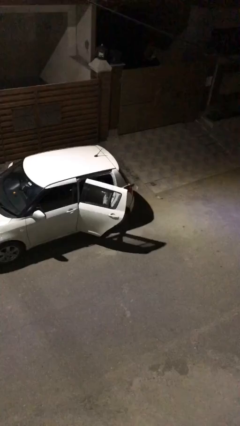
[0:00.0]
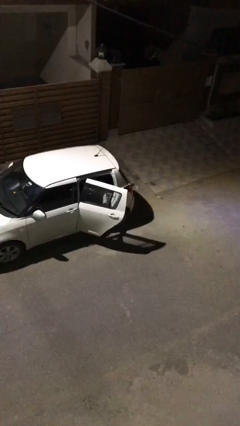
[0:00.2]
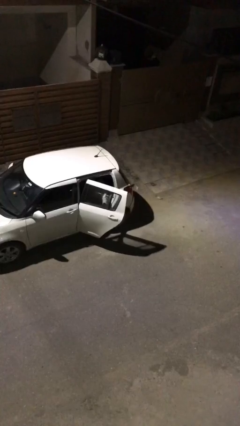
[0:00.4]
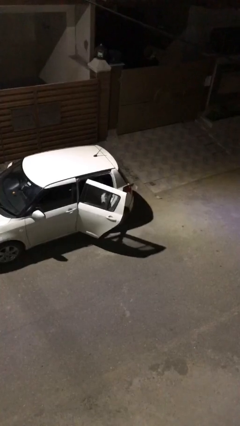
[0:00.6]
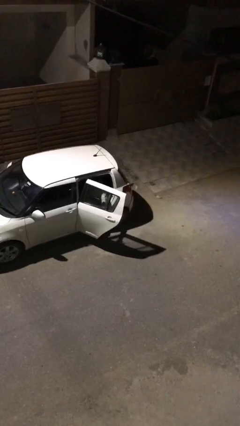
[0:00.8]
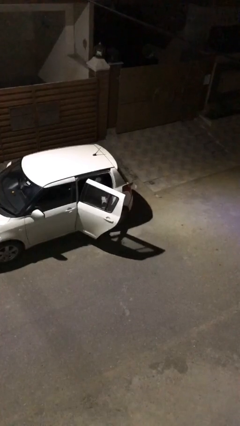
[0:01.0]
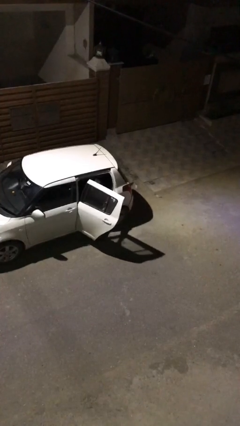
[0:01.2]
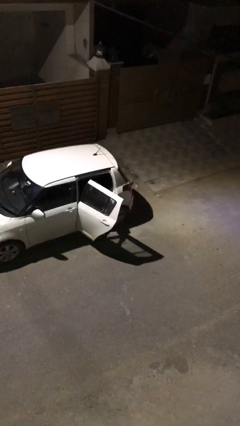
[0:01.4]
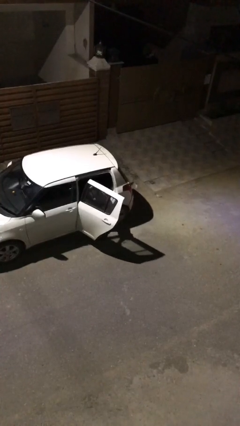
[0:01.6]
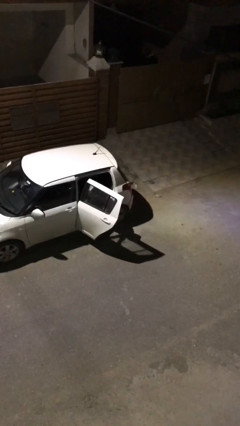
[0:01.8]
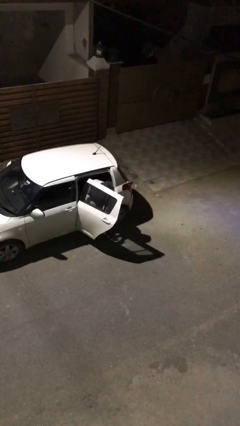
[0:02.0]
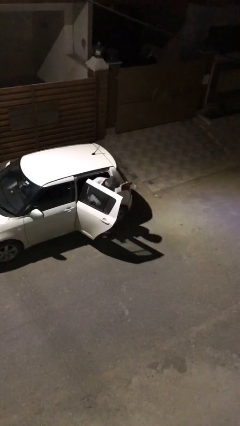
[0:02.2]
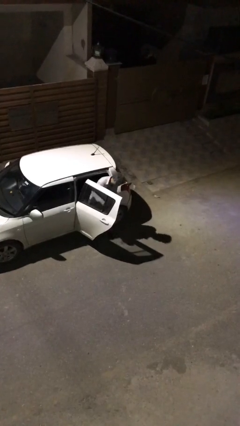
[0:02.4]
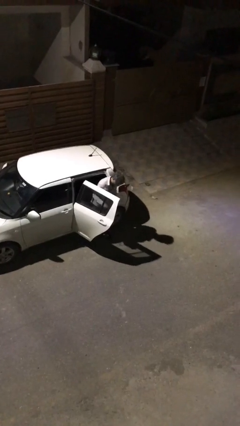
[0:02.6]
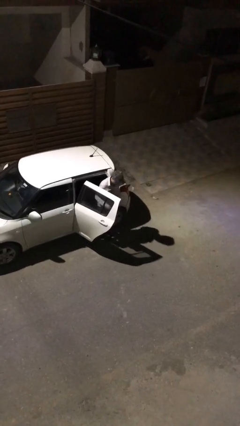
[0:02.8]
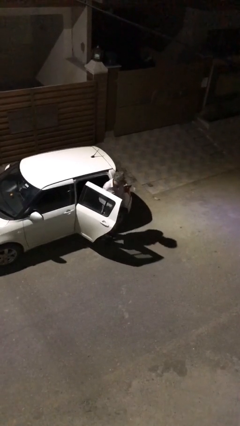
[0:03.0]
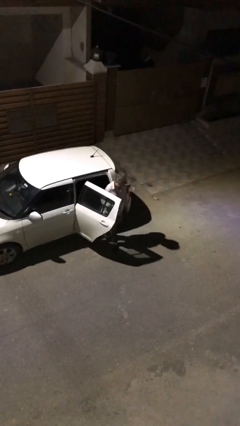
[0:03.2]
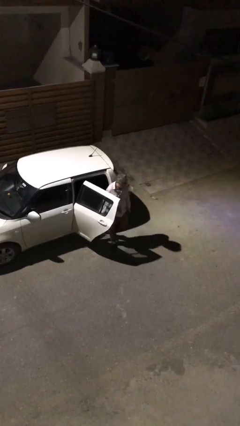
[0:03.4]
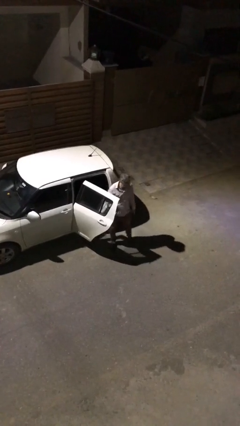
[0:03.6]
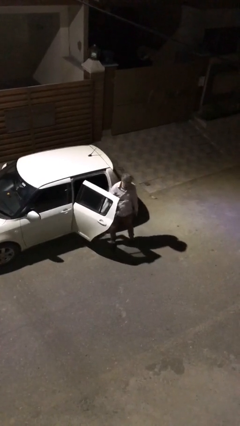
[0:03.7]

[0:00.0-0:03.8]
person exits car

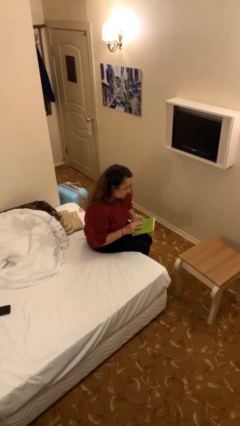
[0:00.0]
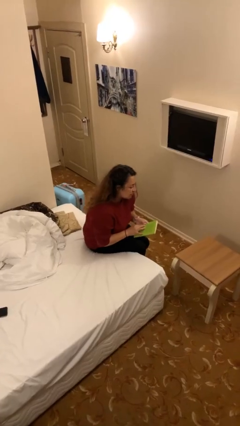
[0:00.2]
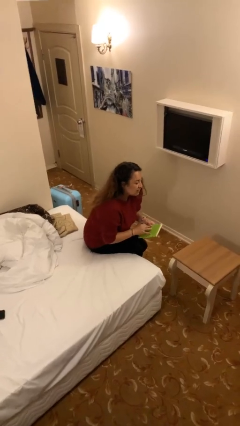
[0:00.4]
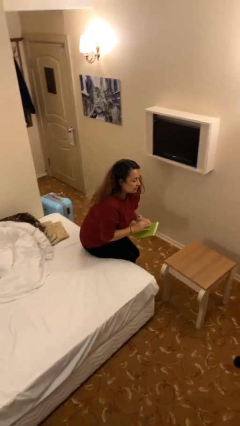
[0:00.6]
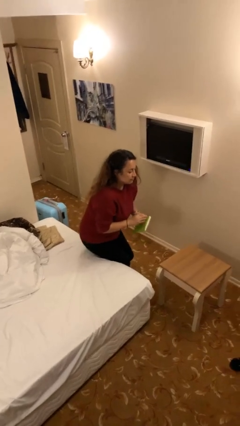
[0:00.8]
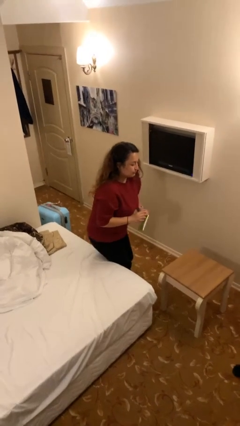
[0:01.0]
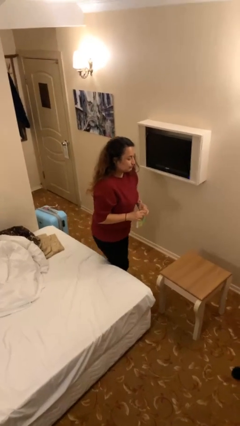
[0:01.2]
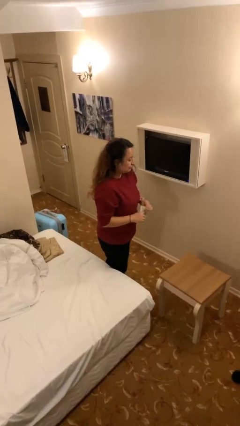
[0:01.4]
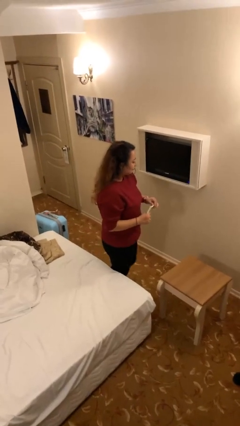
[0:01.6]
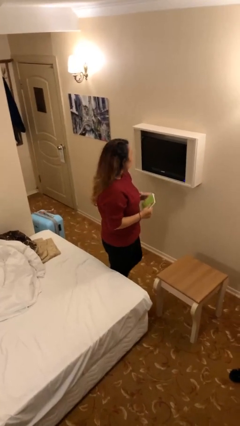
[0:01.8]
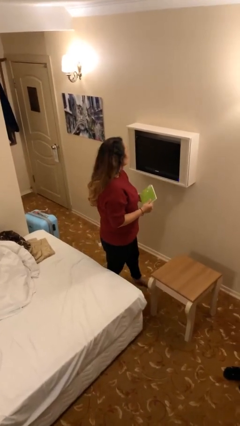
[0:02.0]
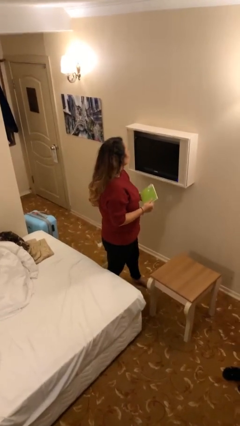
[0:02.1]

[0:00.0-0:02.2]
person stands up

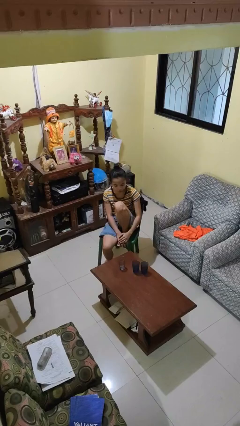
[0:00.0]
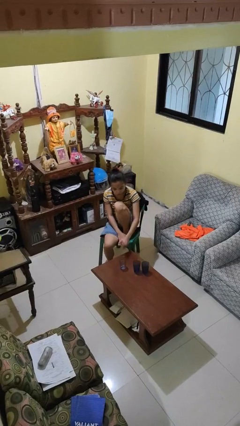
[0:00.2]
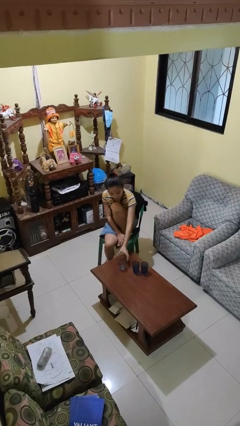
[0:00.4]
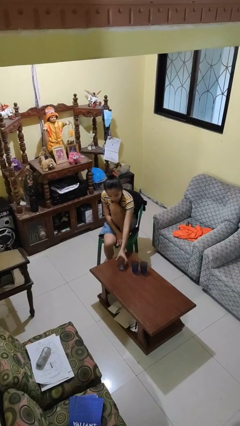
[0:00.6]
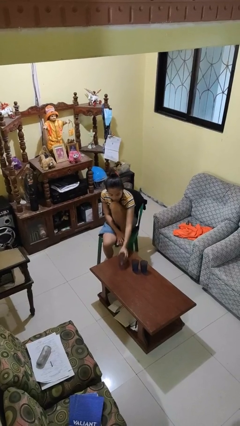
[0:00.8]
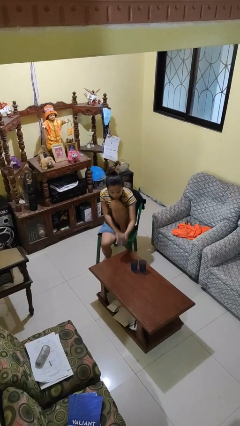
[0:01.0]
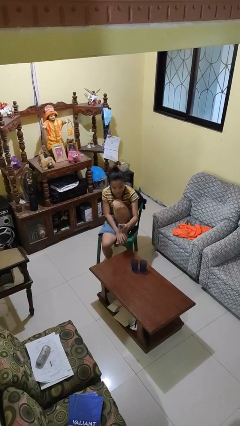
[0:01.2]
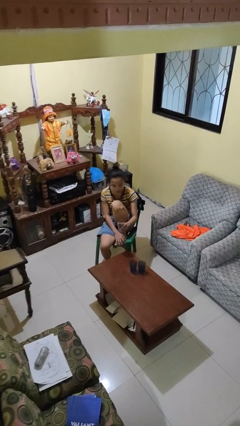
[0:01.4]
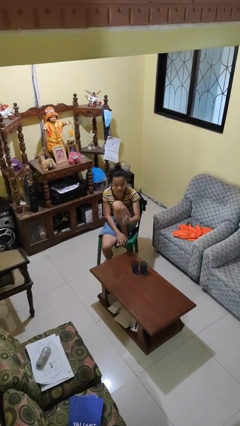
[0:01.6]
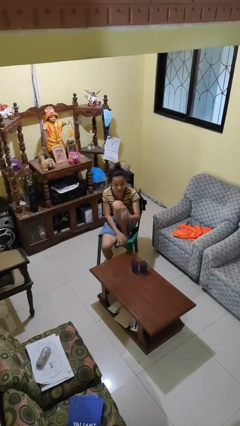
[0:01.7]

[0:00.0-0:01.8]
person picks up object from table

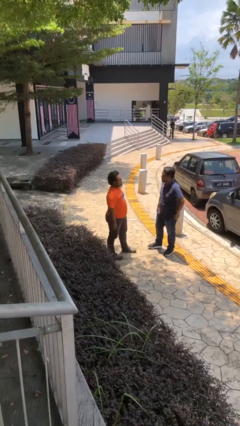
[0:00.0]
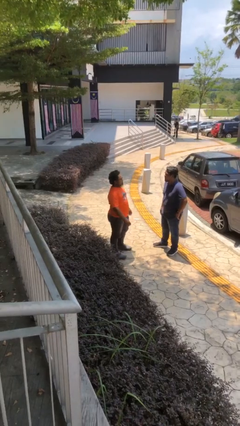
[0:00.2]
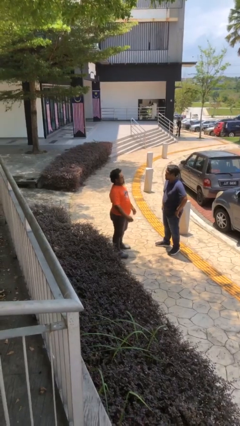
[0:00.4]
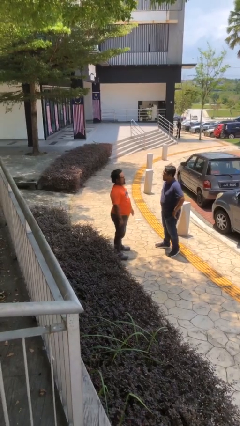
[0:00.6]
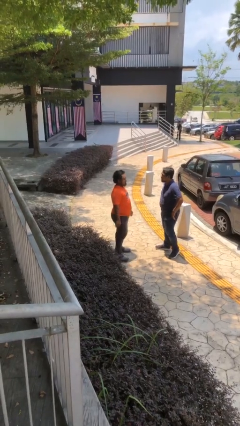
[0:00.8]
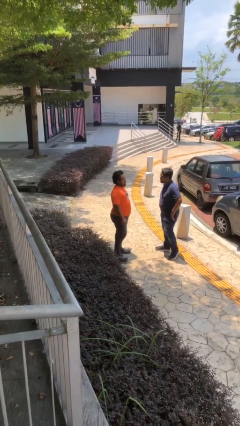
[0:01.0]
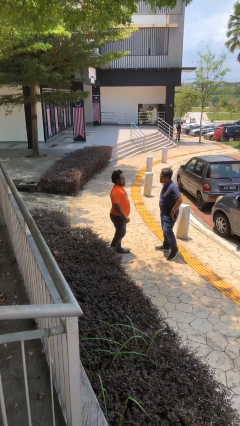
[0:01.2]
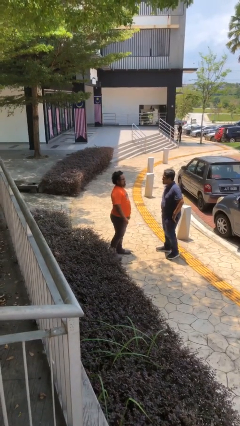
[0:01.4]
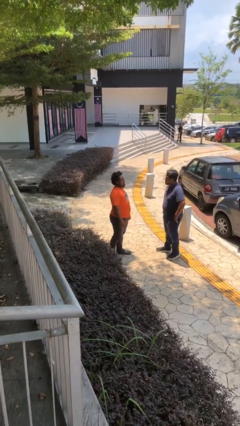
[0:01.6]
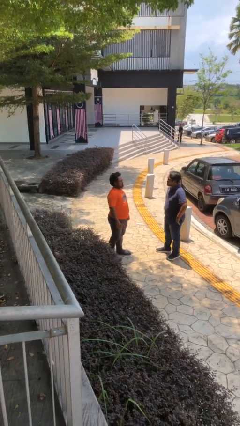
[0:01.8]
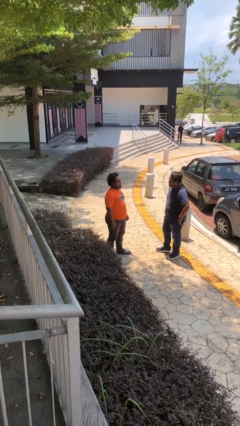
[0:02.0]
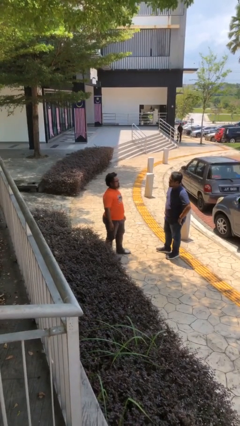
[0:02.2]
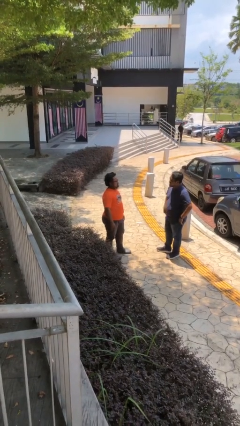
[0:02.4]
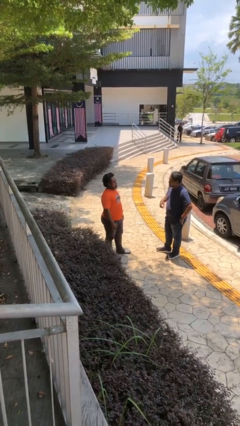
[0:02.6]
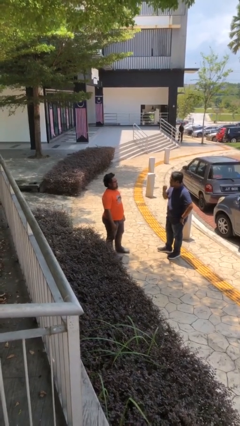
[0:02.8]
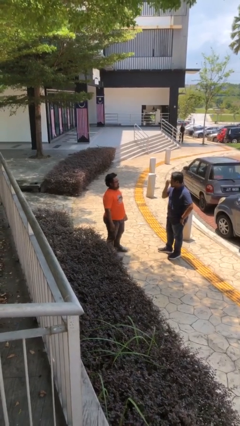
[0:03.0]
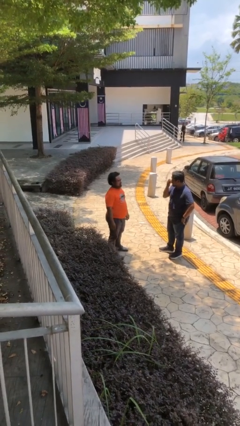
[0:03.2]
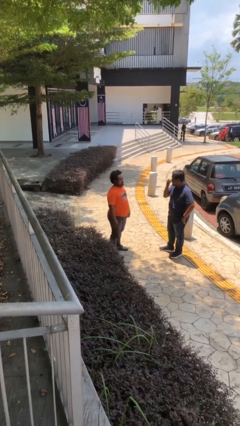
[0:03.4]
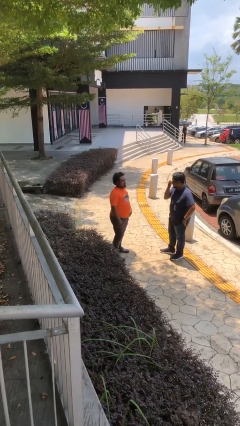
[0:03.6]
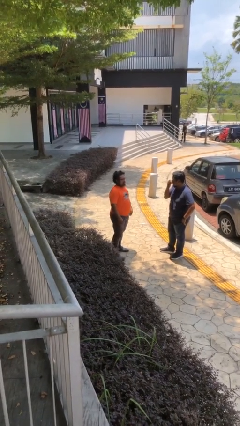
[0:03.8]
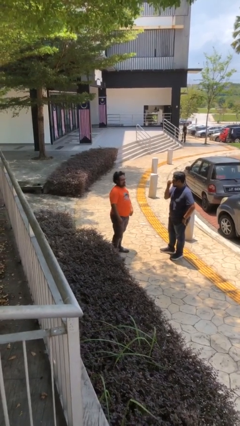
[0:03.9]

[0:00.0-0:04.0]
person talks to person

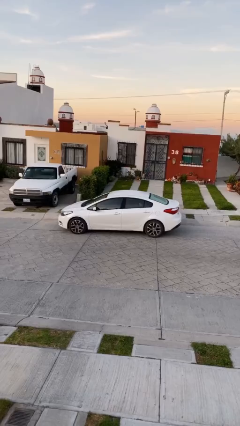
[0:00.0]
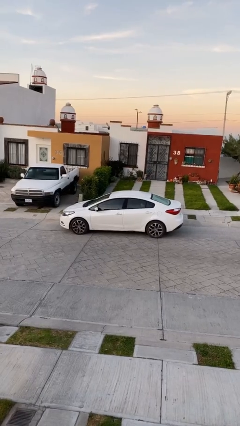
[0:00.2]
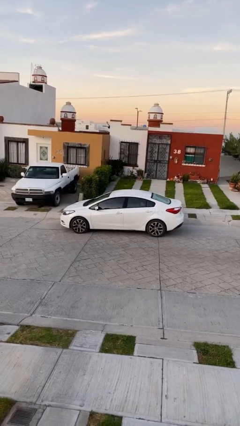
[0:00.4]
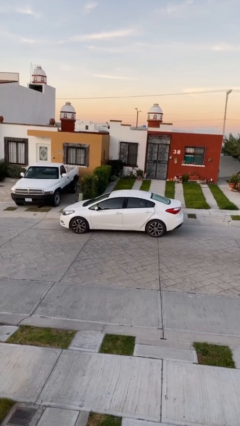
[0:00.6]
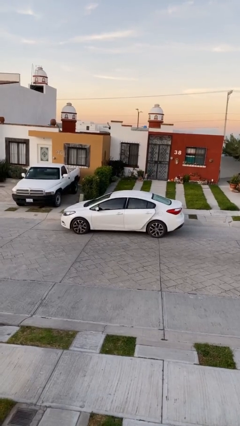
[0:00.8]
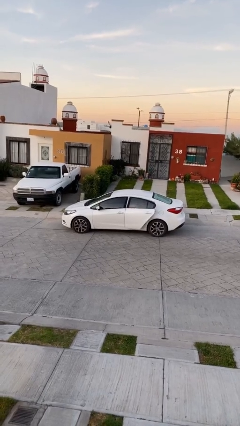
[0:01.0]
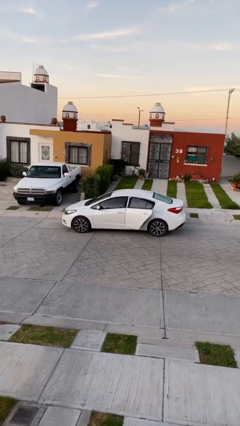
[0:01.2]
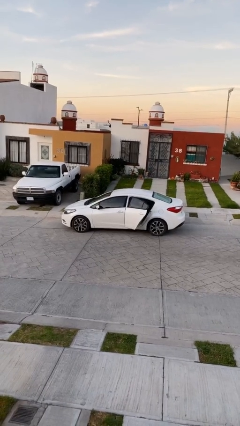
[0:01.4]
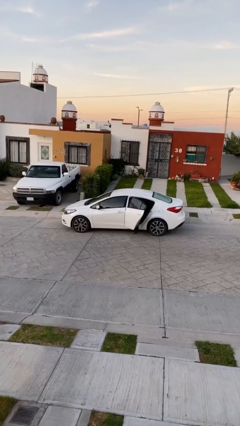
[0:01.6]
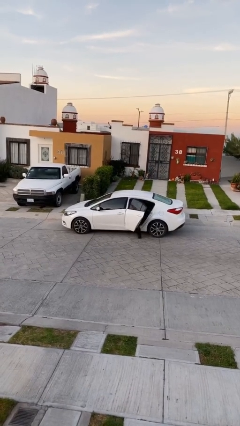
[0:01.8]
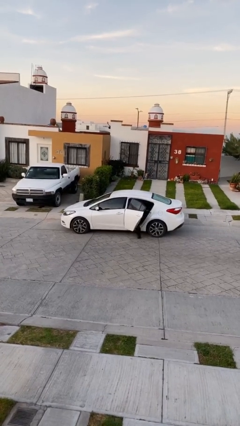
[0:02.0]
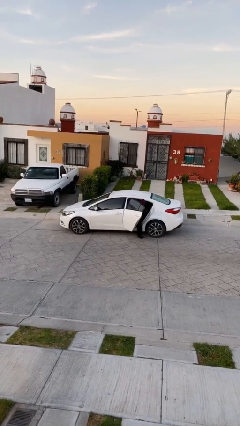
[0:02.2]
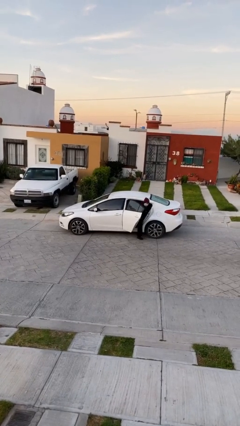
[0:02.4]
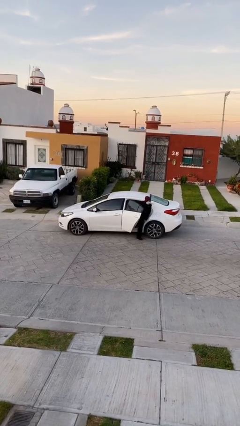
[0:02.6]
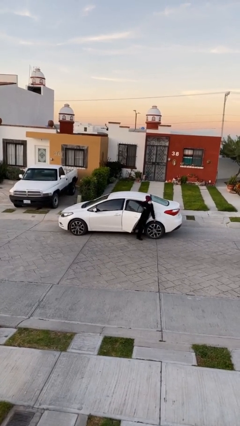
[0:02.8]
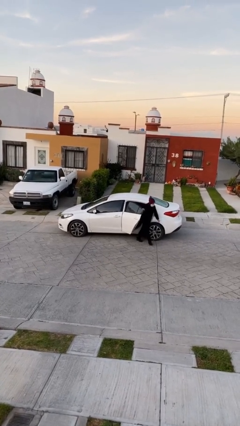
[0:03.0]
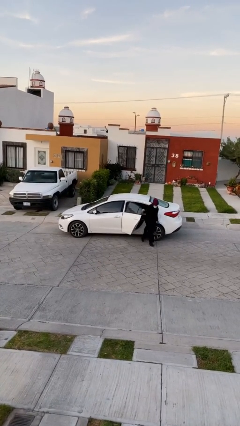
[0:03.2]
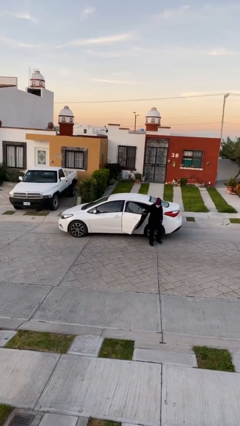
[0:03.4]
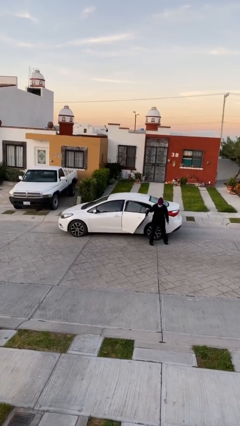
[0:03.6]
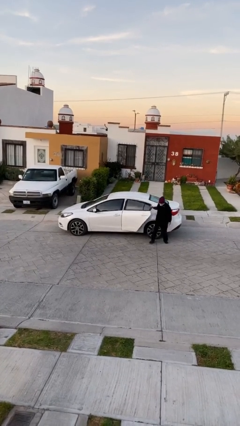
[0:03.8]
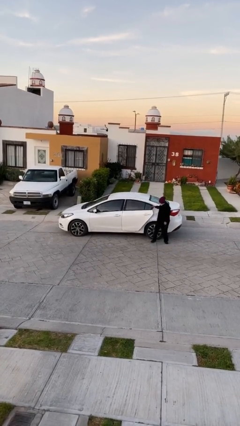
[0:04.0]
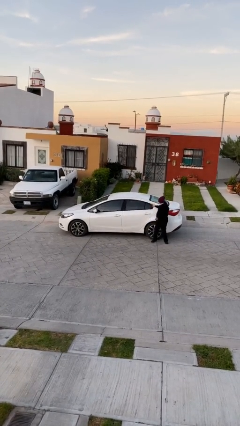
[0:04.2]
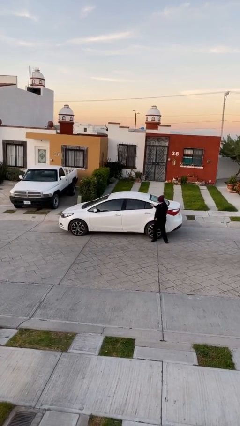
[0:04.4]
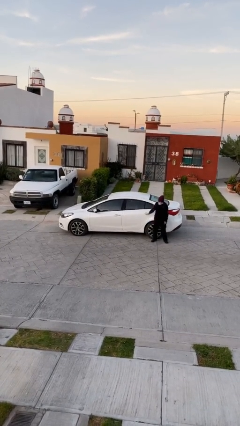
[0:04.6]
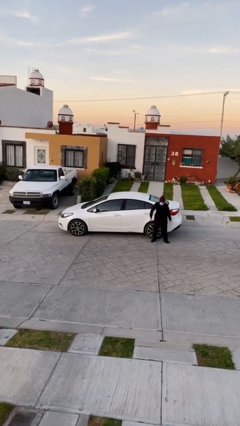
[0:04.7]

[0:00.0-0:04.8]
car drops off person

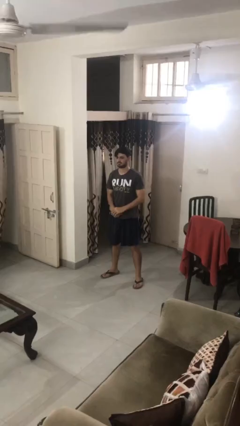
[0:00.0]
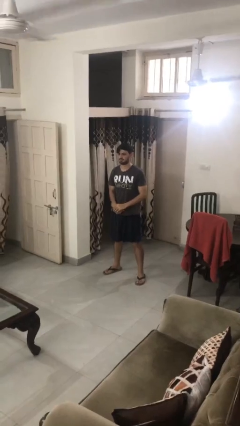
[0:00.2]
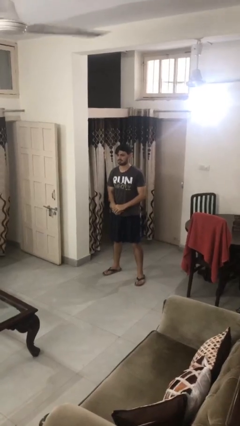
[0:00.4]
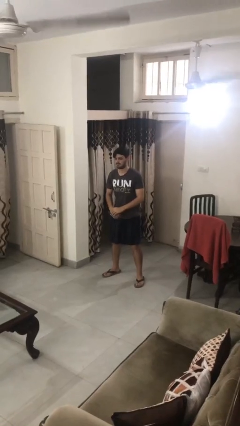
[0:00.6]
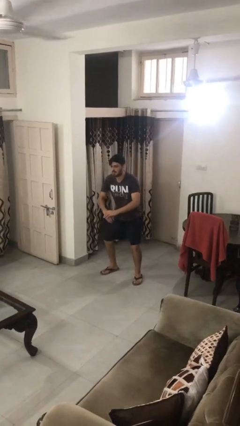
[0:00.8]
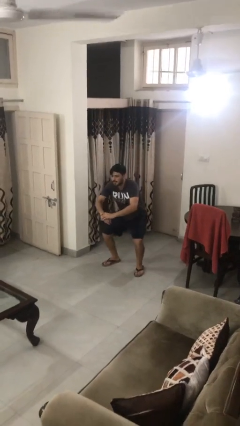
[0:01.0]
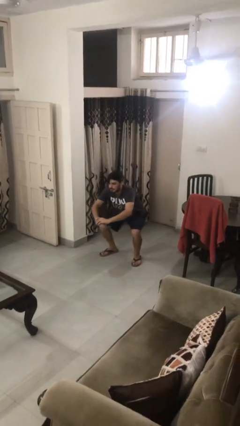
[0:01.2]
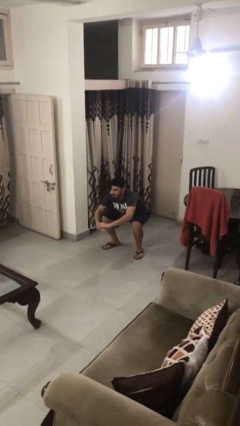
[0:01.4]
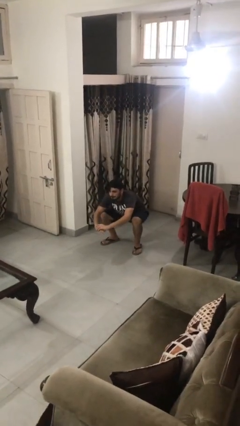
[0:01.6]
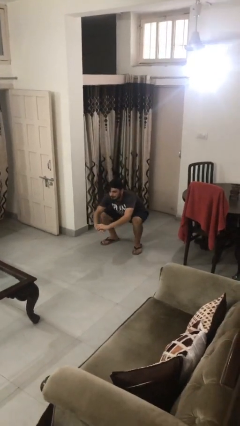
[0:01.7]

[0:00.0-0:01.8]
person squats
